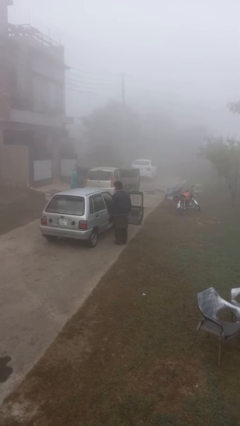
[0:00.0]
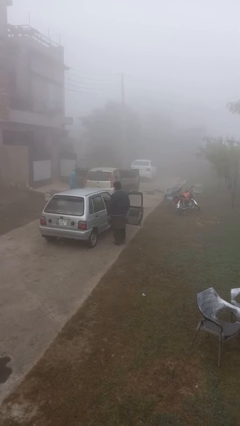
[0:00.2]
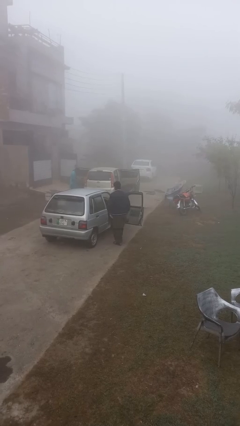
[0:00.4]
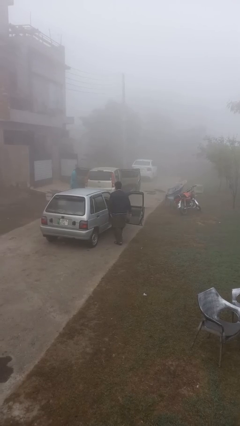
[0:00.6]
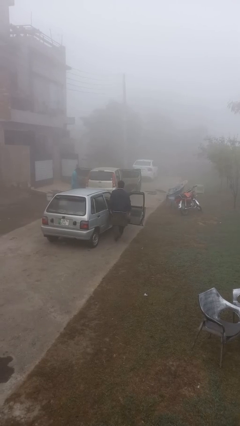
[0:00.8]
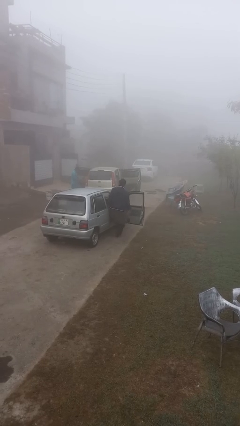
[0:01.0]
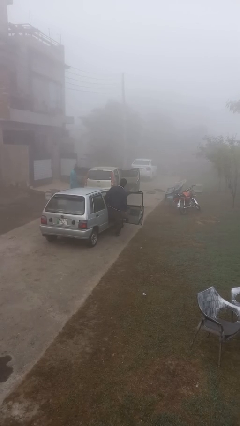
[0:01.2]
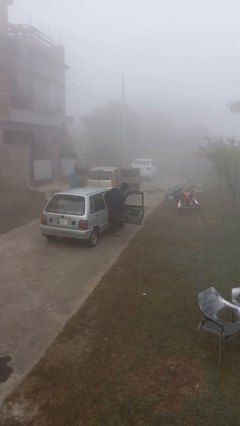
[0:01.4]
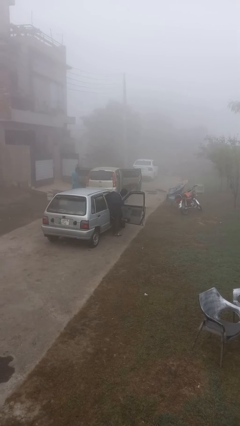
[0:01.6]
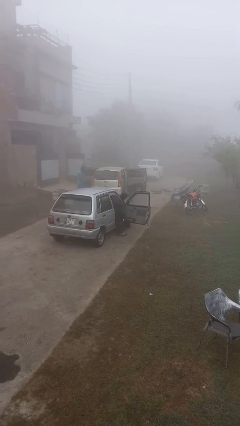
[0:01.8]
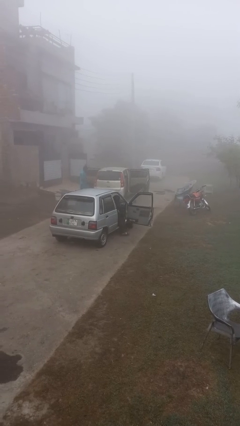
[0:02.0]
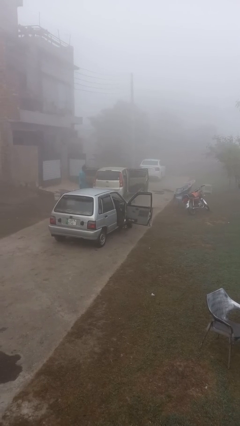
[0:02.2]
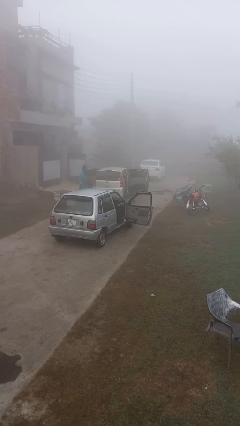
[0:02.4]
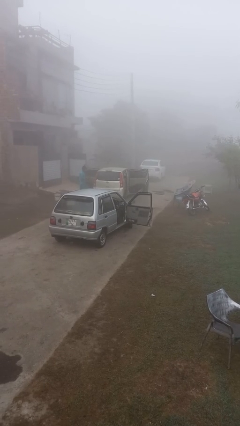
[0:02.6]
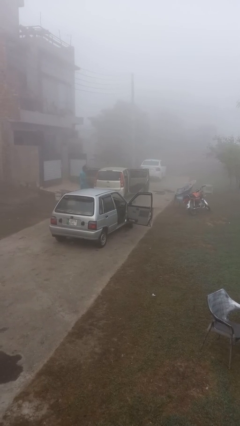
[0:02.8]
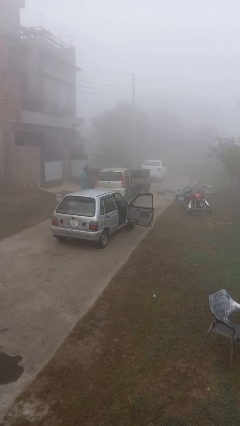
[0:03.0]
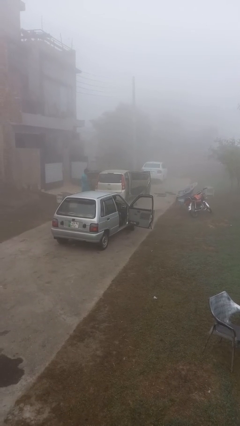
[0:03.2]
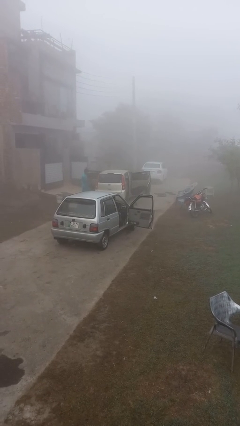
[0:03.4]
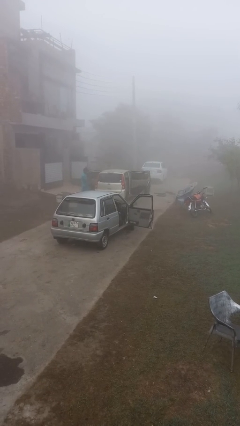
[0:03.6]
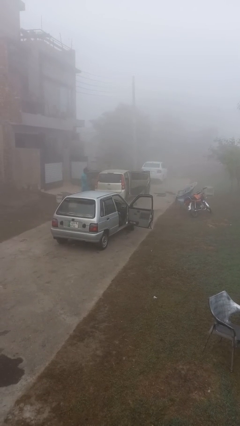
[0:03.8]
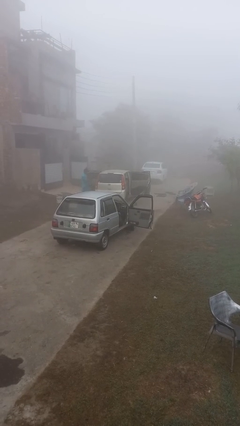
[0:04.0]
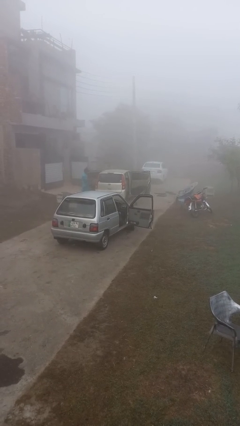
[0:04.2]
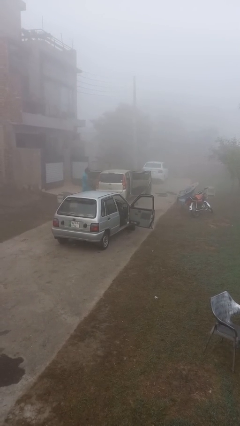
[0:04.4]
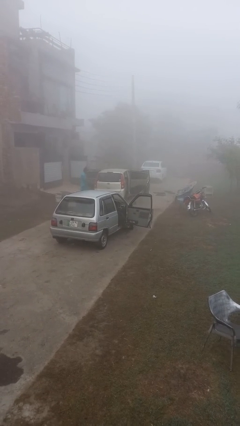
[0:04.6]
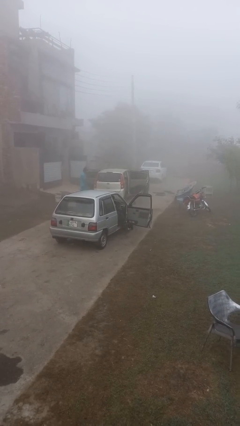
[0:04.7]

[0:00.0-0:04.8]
person enters car

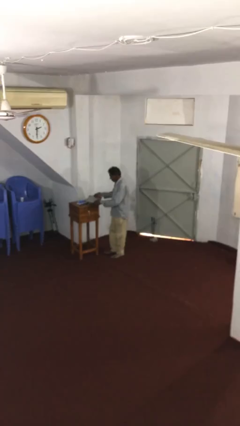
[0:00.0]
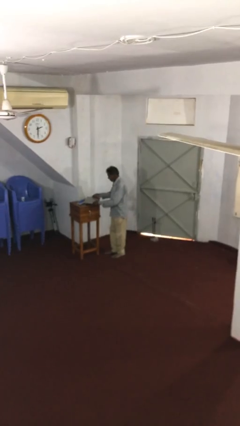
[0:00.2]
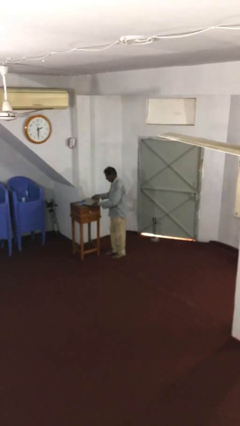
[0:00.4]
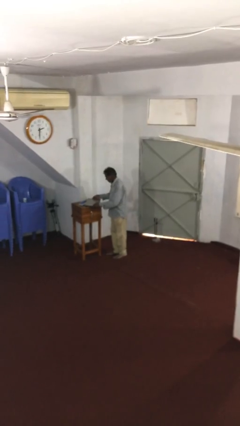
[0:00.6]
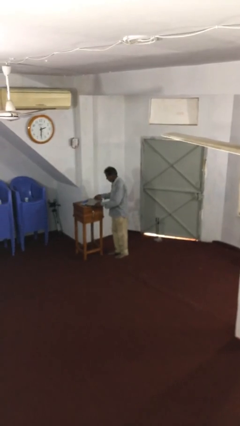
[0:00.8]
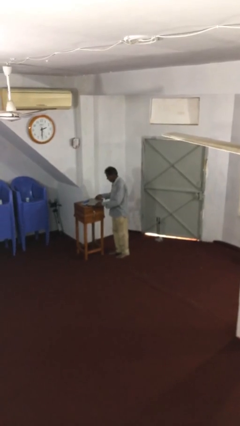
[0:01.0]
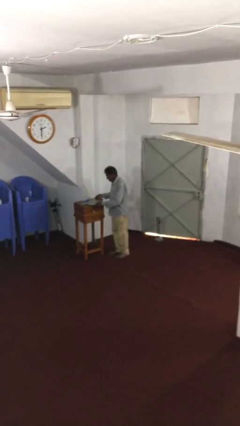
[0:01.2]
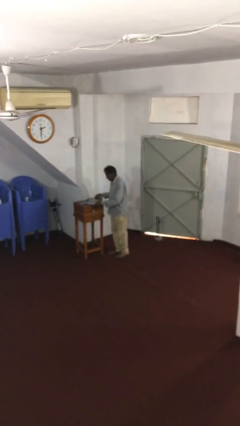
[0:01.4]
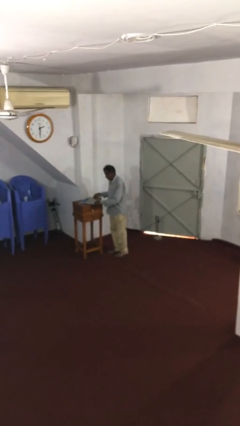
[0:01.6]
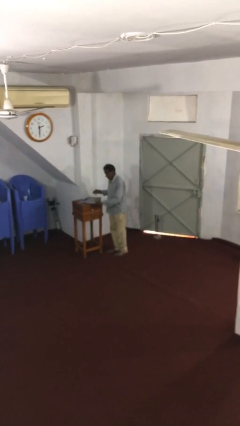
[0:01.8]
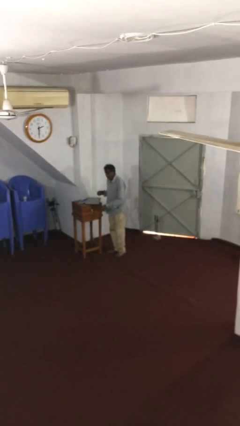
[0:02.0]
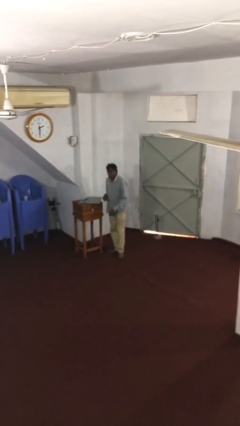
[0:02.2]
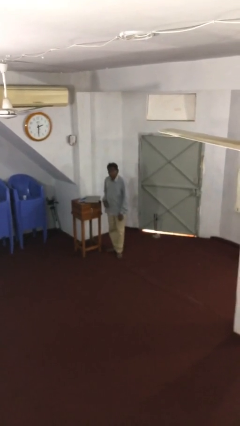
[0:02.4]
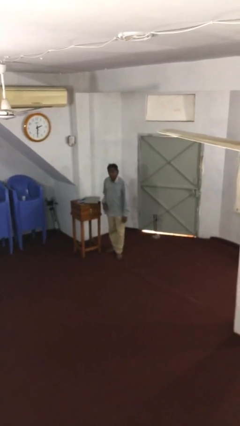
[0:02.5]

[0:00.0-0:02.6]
person puts down object on table

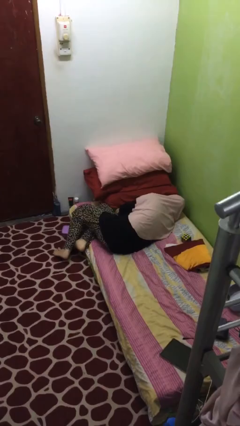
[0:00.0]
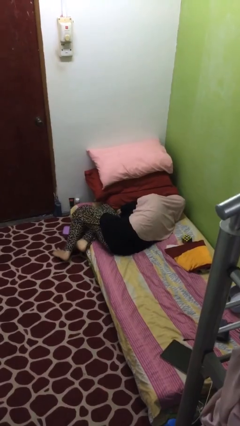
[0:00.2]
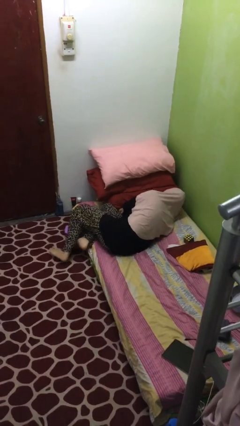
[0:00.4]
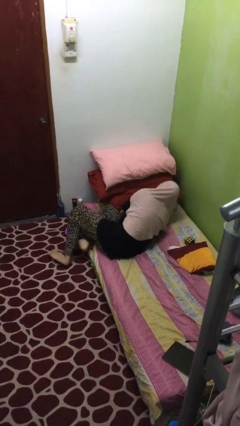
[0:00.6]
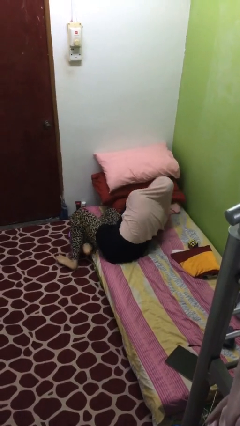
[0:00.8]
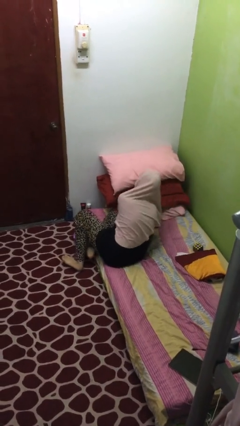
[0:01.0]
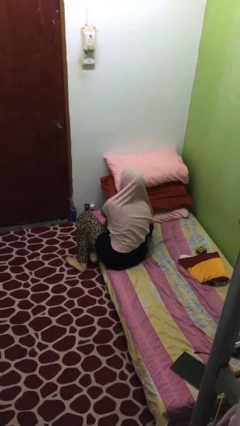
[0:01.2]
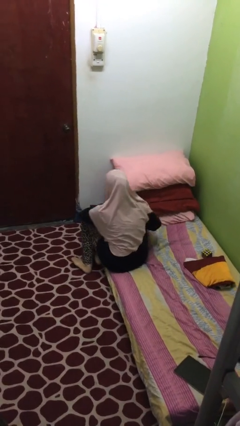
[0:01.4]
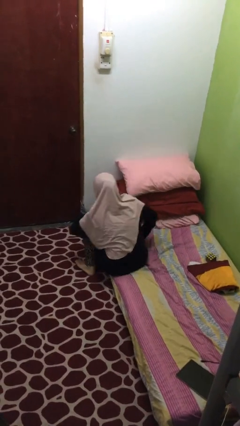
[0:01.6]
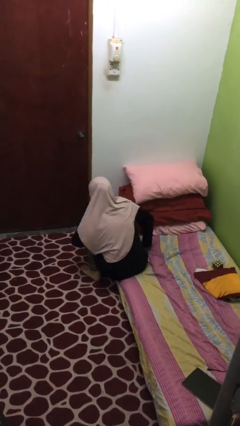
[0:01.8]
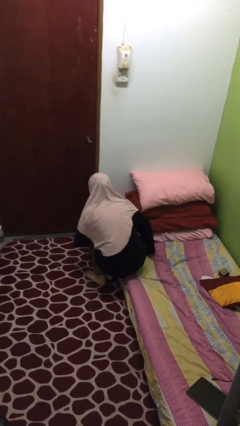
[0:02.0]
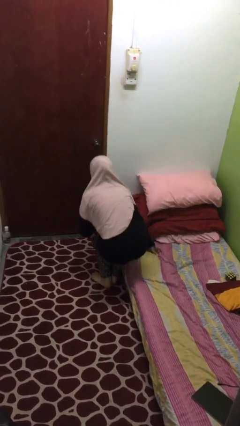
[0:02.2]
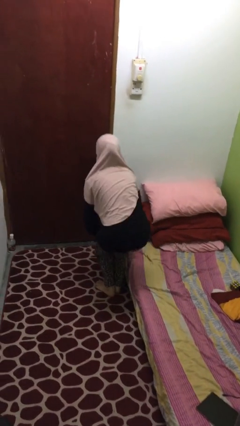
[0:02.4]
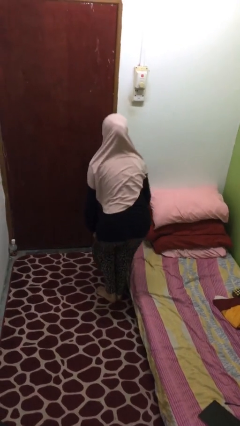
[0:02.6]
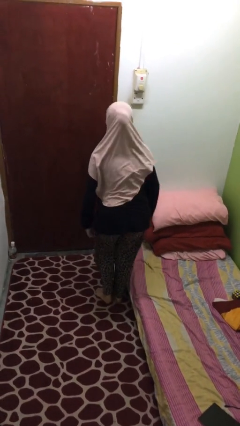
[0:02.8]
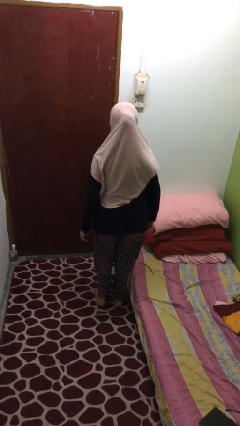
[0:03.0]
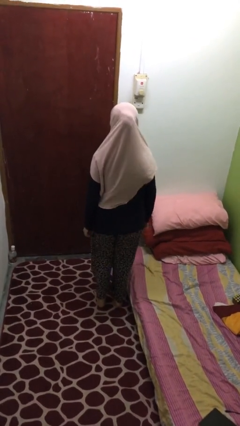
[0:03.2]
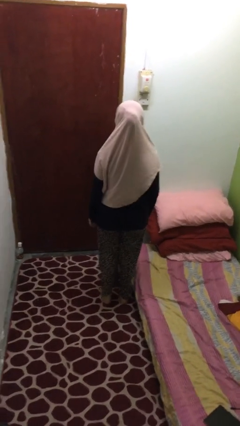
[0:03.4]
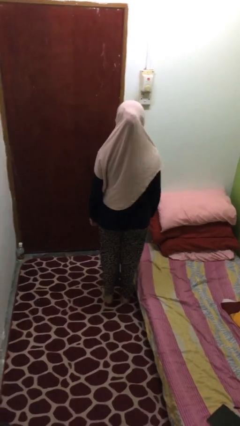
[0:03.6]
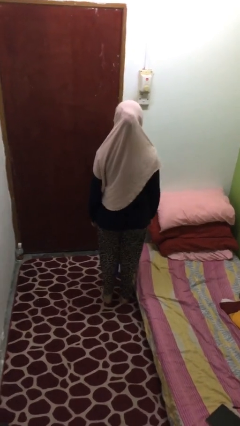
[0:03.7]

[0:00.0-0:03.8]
person stands up

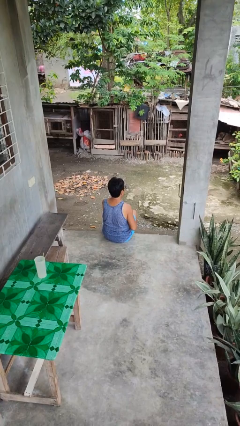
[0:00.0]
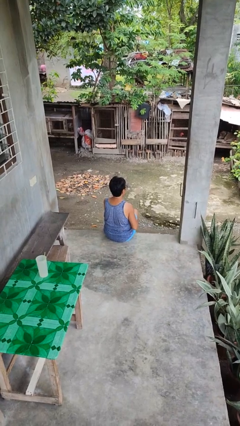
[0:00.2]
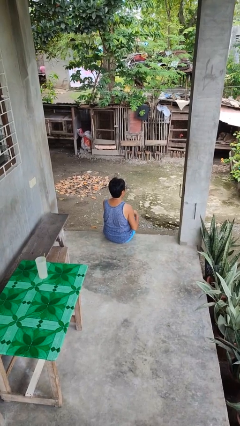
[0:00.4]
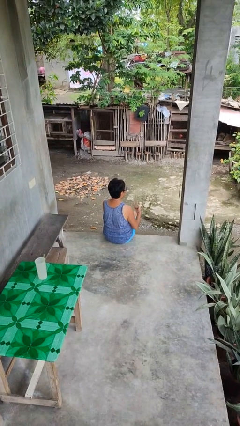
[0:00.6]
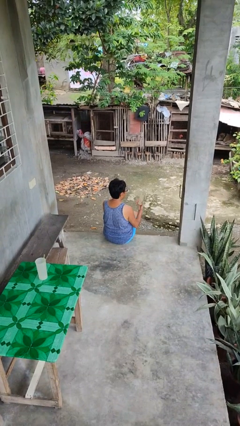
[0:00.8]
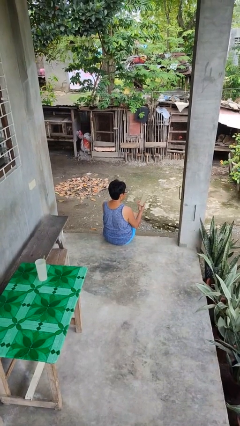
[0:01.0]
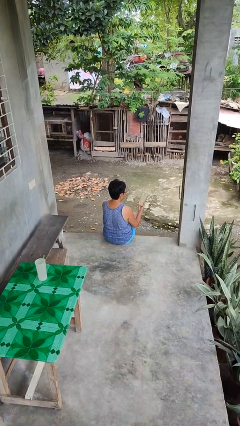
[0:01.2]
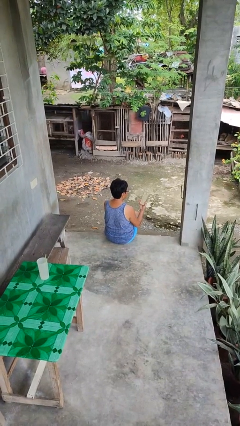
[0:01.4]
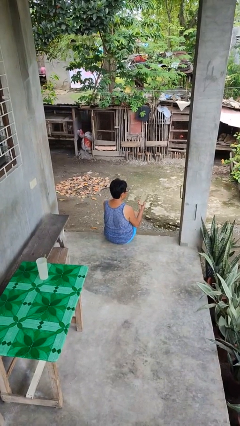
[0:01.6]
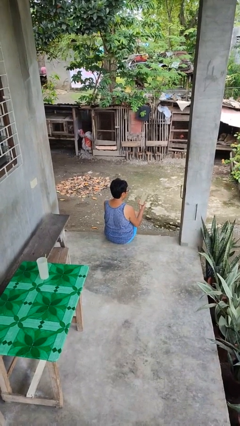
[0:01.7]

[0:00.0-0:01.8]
person takes phone from pocket

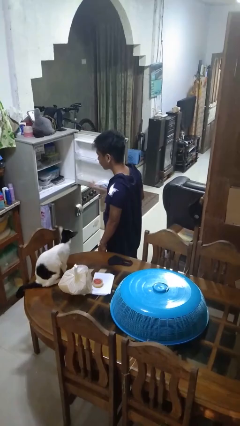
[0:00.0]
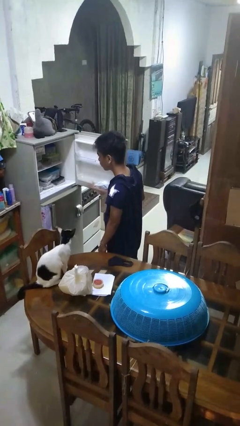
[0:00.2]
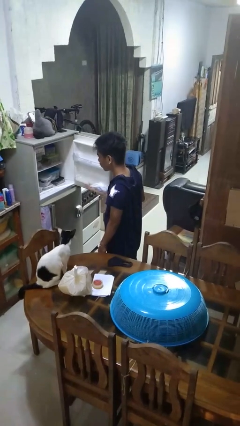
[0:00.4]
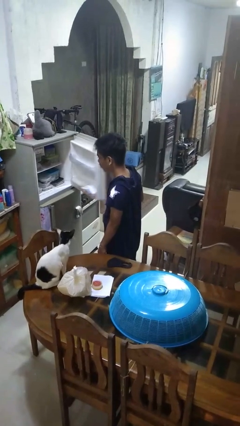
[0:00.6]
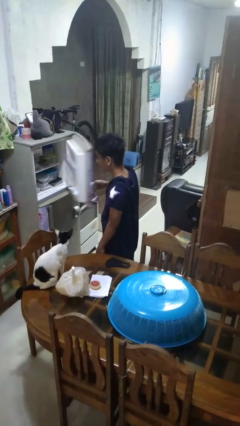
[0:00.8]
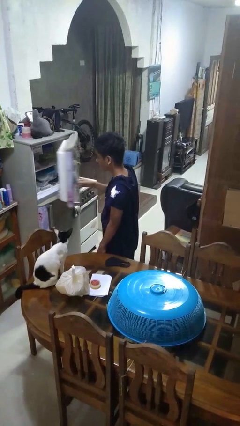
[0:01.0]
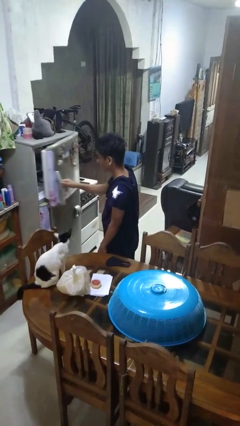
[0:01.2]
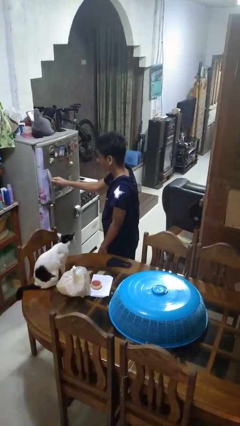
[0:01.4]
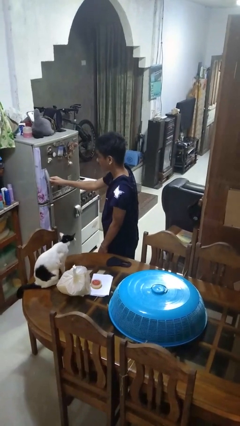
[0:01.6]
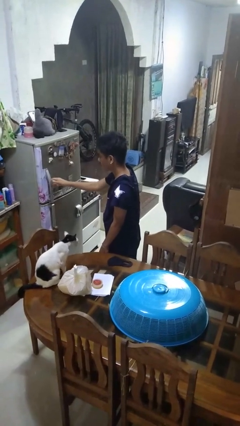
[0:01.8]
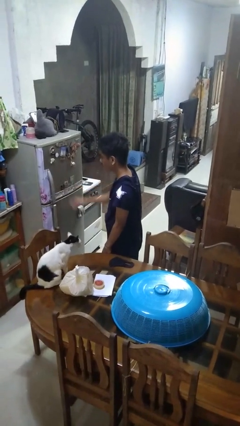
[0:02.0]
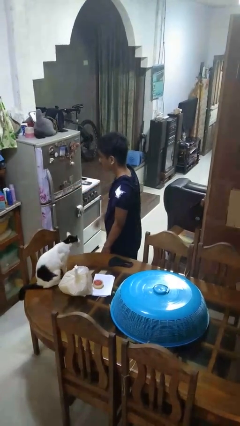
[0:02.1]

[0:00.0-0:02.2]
person closes refrigerator

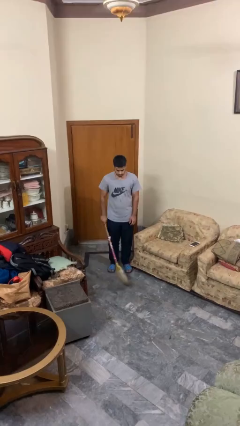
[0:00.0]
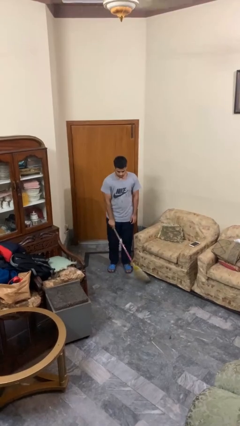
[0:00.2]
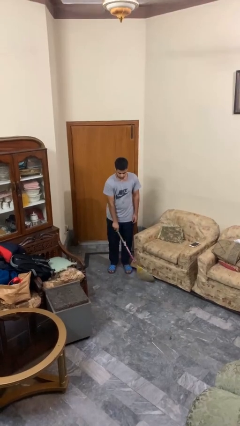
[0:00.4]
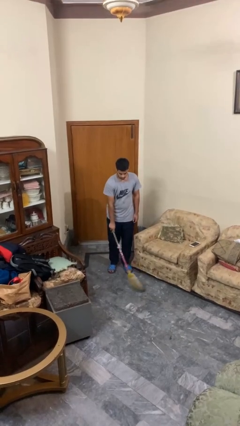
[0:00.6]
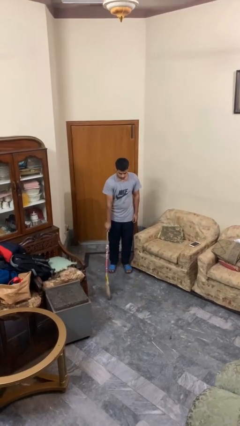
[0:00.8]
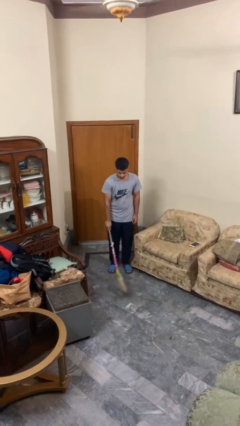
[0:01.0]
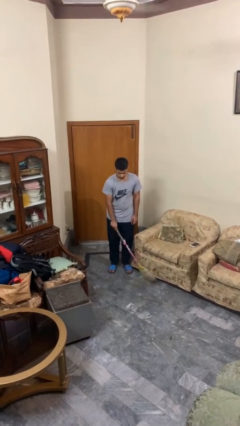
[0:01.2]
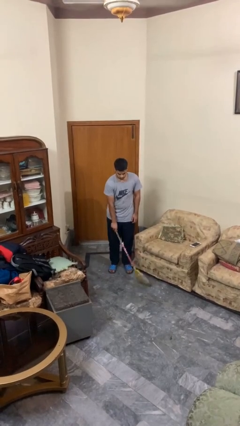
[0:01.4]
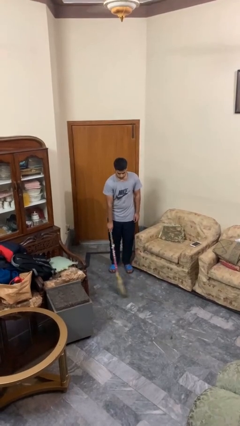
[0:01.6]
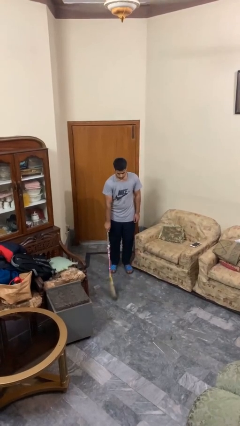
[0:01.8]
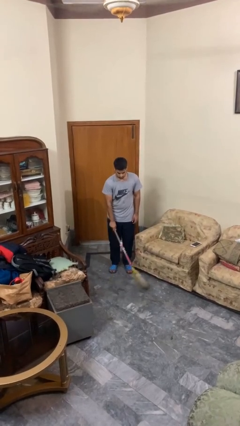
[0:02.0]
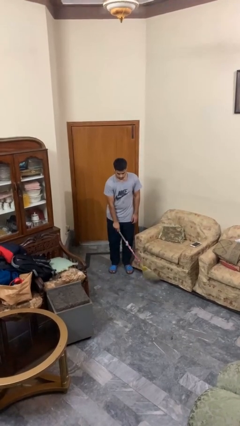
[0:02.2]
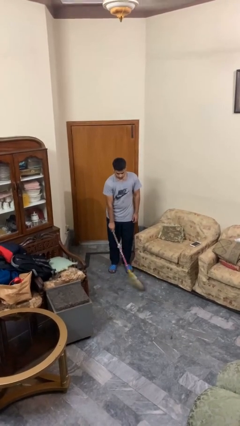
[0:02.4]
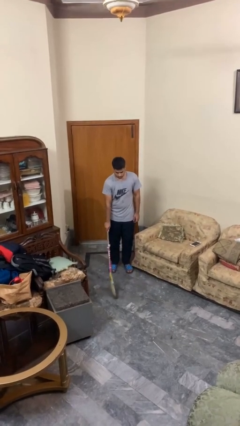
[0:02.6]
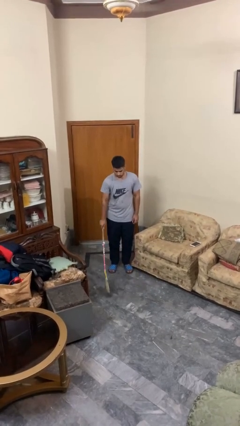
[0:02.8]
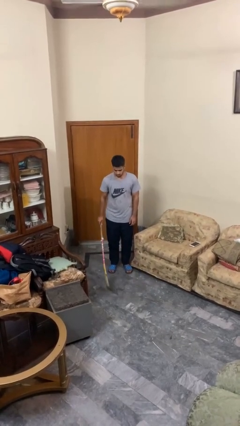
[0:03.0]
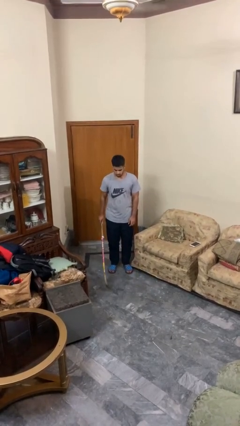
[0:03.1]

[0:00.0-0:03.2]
person sweeps floor
